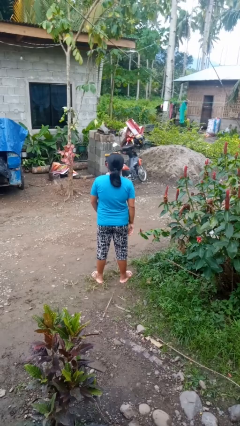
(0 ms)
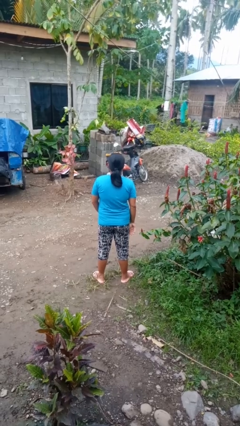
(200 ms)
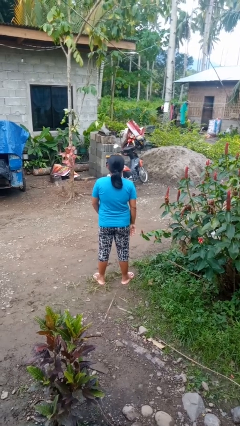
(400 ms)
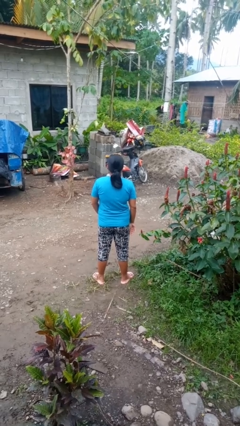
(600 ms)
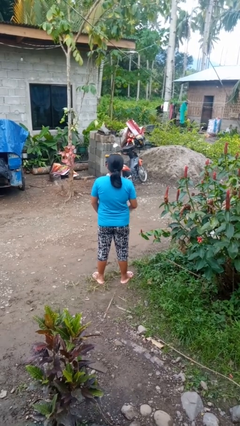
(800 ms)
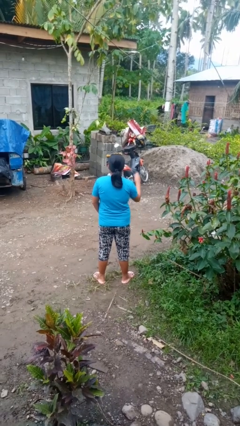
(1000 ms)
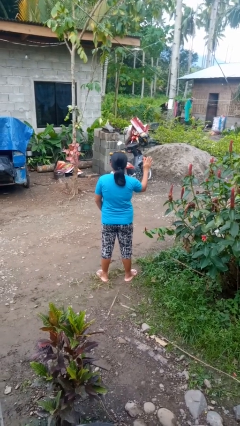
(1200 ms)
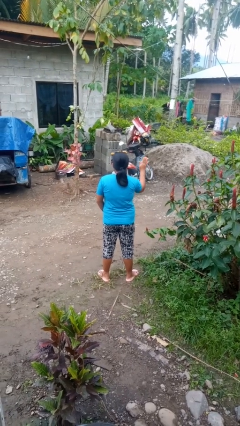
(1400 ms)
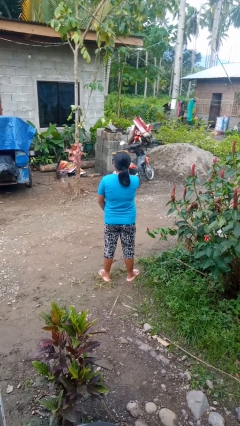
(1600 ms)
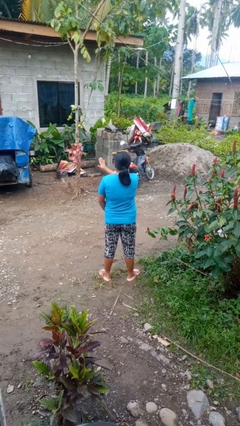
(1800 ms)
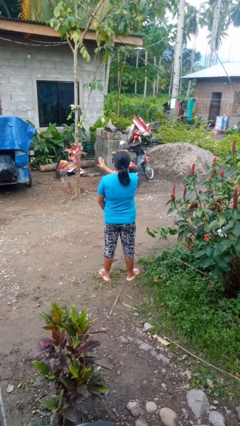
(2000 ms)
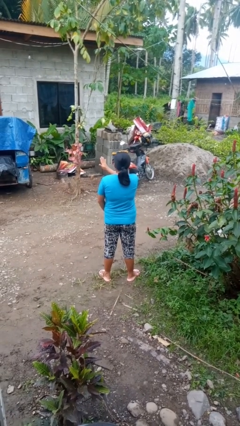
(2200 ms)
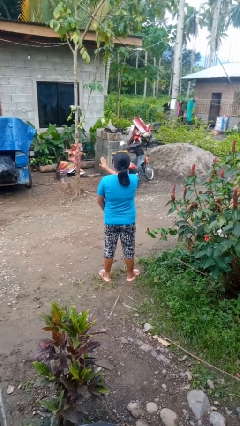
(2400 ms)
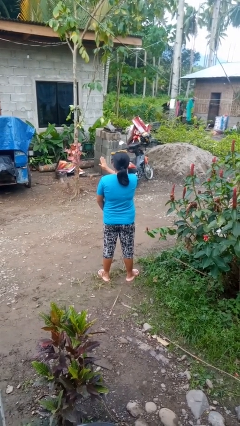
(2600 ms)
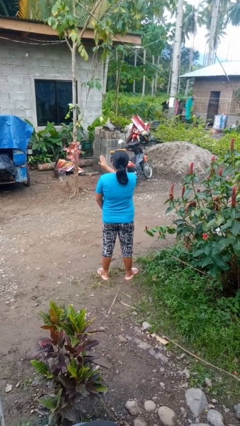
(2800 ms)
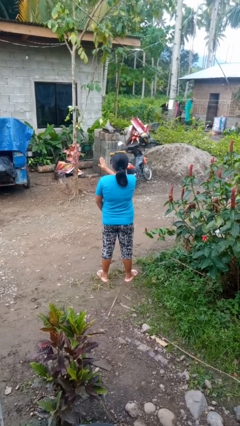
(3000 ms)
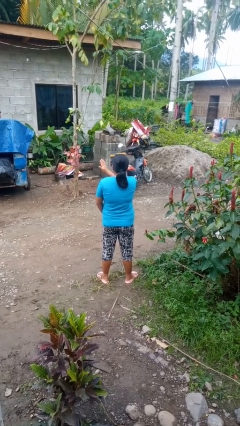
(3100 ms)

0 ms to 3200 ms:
person gestures swipe left

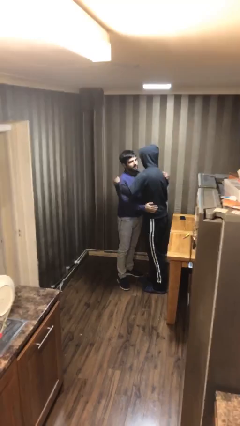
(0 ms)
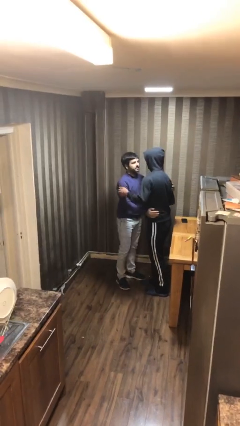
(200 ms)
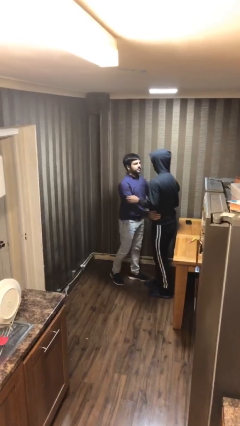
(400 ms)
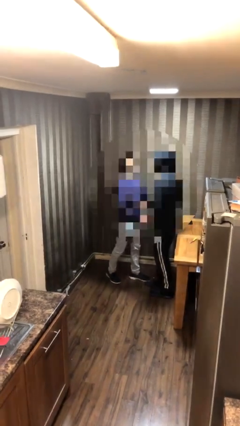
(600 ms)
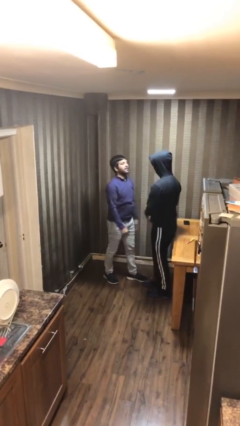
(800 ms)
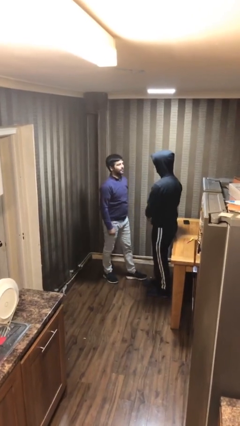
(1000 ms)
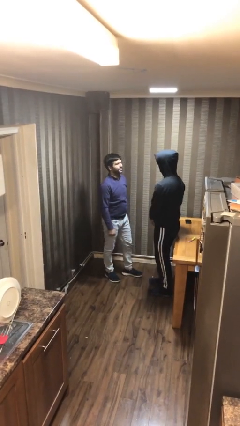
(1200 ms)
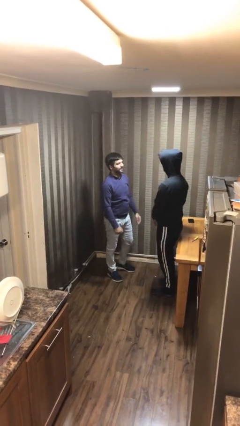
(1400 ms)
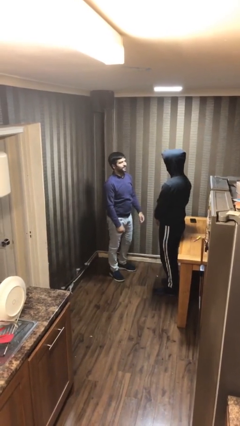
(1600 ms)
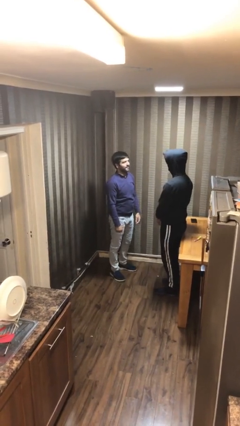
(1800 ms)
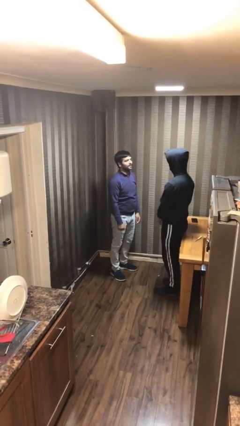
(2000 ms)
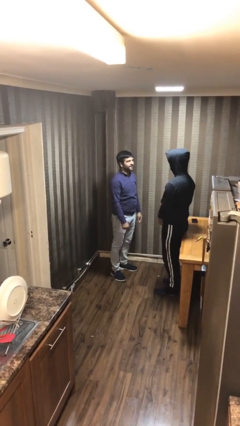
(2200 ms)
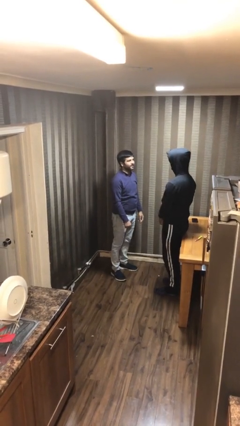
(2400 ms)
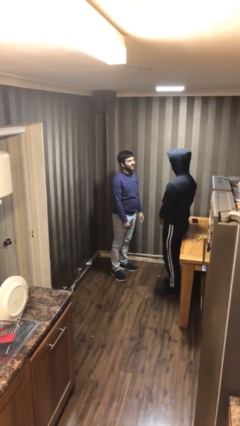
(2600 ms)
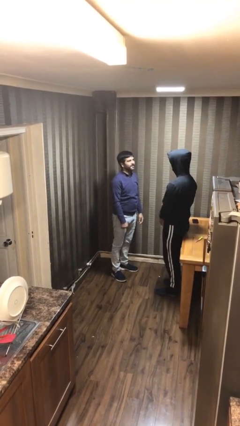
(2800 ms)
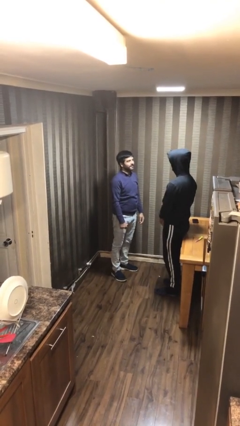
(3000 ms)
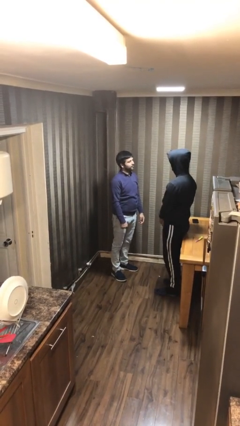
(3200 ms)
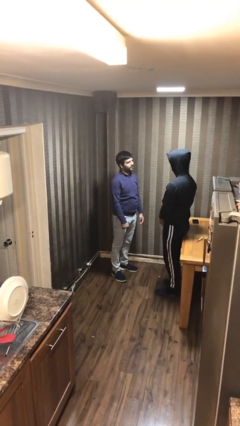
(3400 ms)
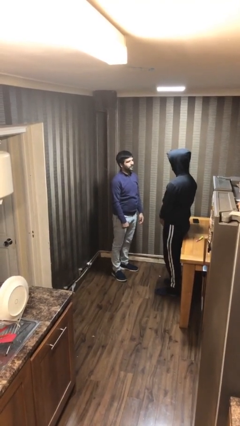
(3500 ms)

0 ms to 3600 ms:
person talks to person

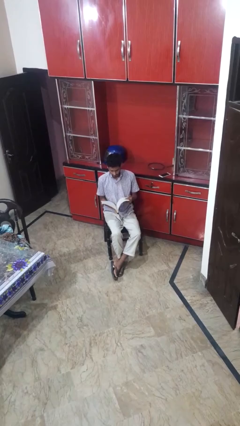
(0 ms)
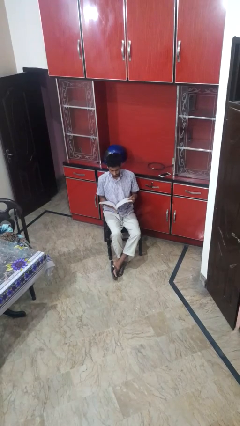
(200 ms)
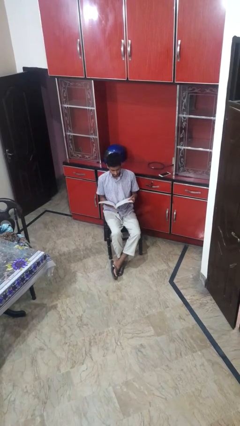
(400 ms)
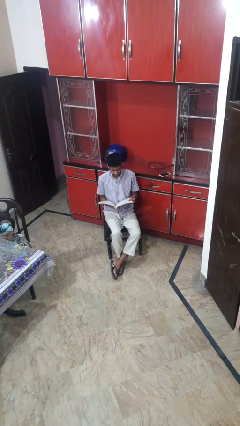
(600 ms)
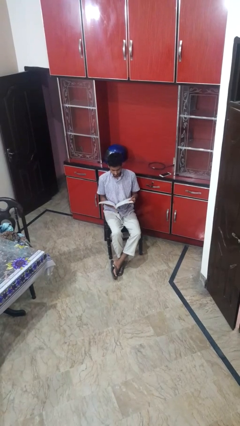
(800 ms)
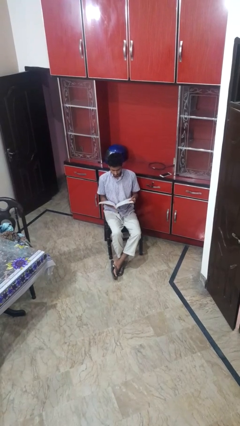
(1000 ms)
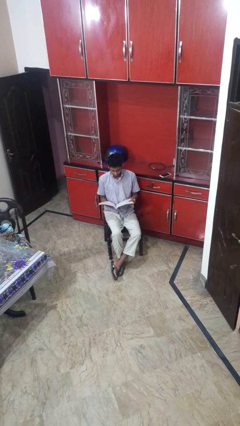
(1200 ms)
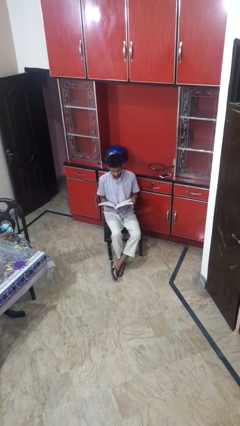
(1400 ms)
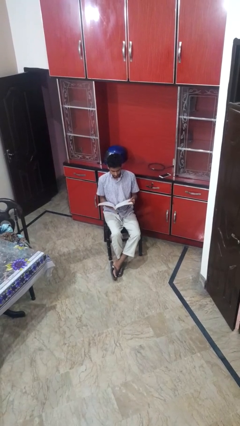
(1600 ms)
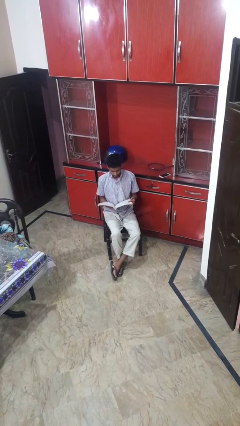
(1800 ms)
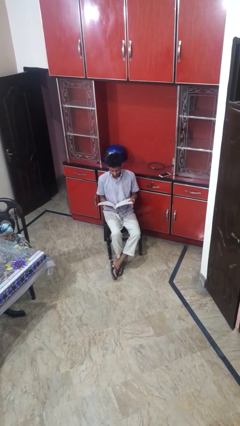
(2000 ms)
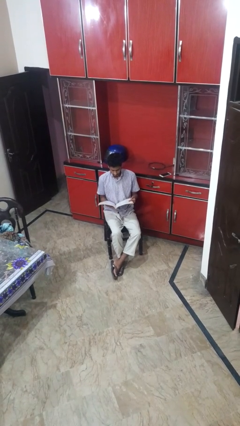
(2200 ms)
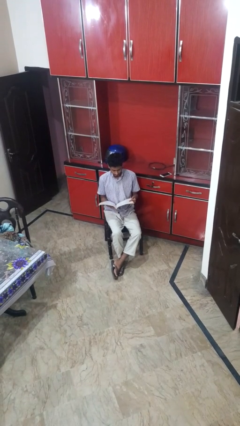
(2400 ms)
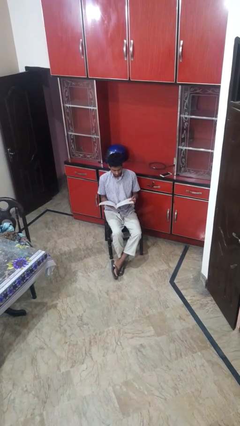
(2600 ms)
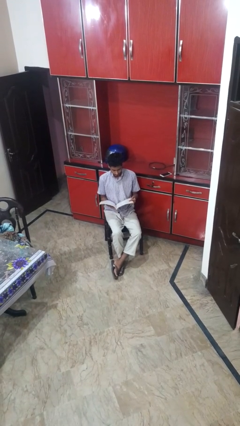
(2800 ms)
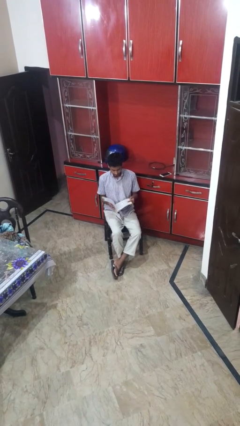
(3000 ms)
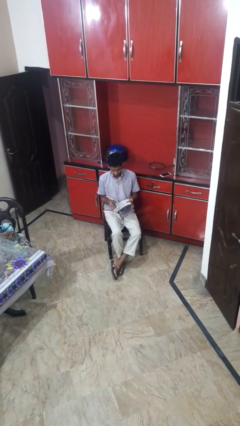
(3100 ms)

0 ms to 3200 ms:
person reads magazine

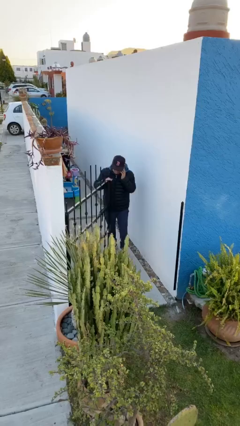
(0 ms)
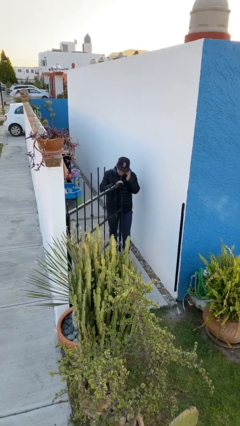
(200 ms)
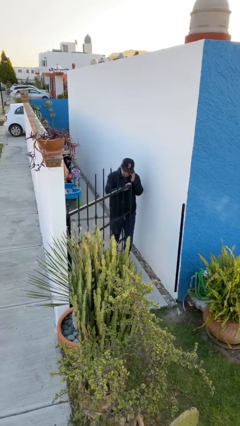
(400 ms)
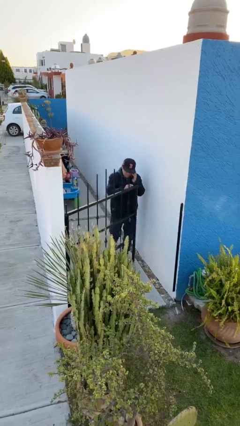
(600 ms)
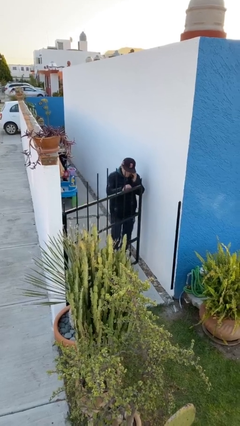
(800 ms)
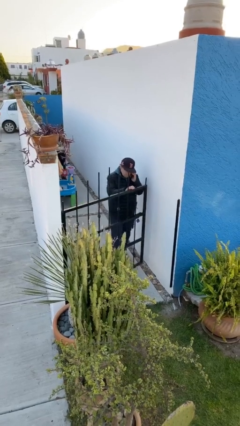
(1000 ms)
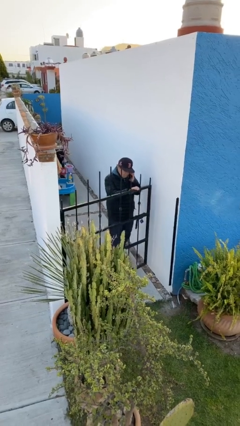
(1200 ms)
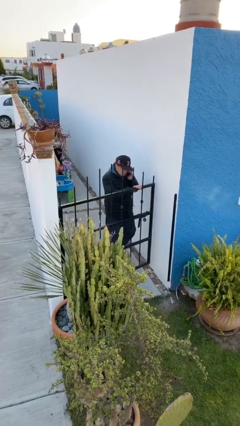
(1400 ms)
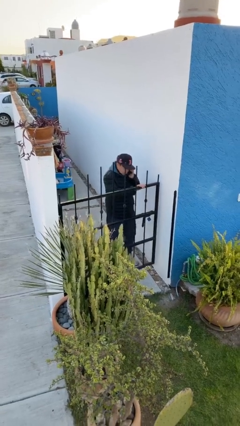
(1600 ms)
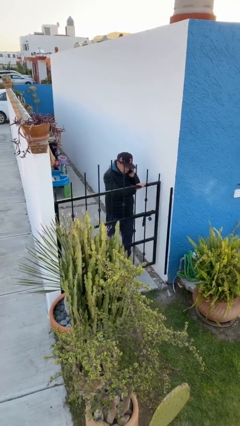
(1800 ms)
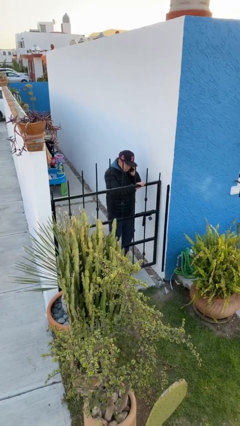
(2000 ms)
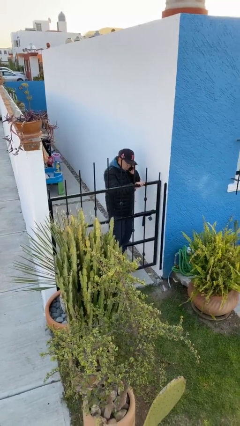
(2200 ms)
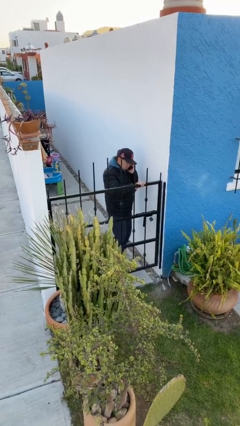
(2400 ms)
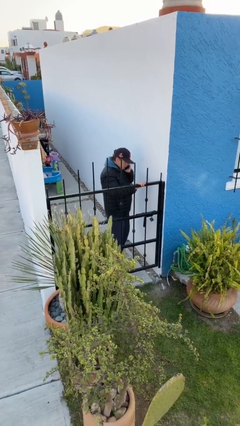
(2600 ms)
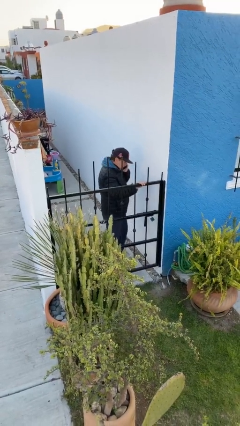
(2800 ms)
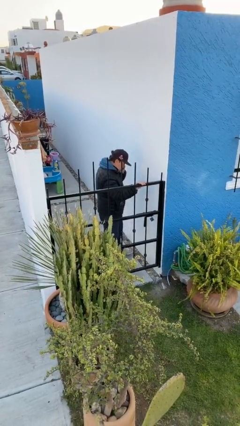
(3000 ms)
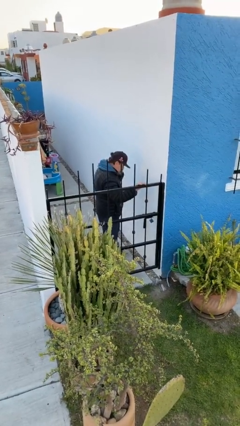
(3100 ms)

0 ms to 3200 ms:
person closes facility door

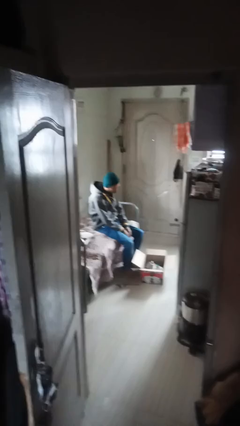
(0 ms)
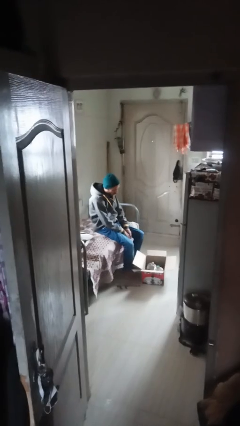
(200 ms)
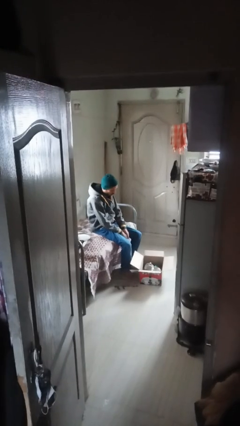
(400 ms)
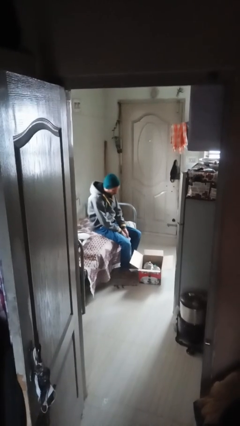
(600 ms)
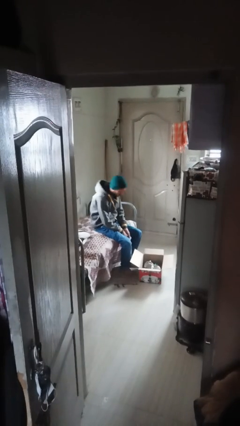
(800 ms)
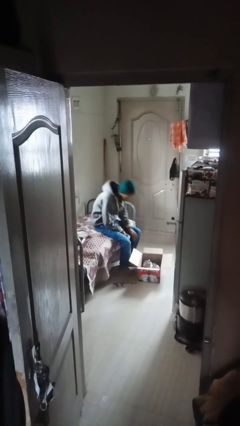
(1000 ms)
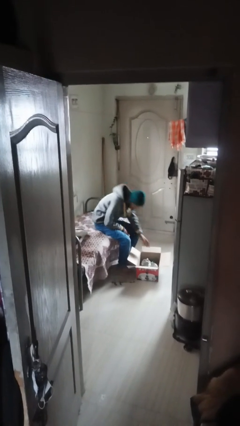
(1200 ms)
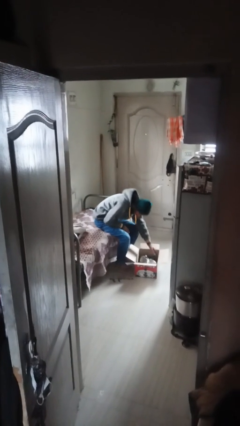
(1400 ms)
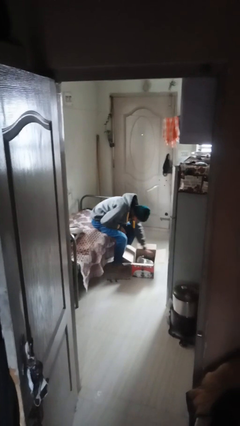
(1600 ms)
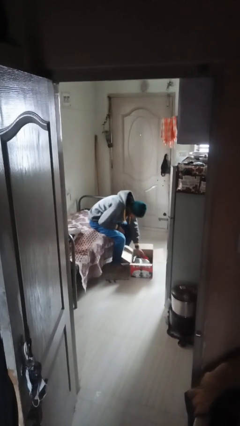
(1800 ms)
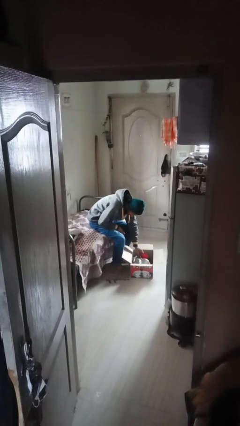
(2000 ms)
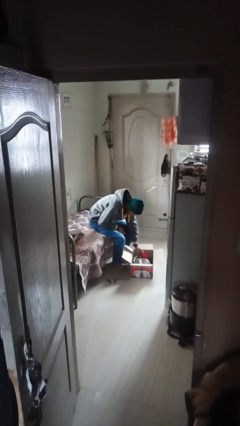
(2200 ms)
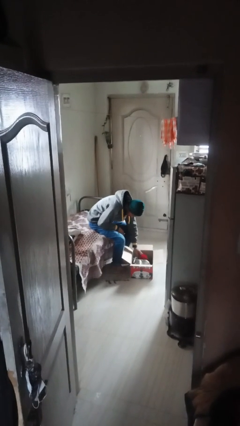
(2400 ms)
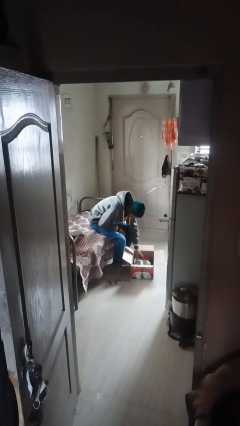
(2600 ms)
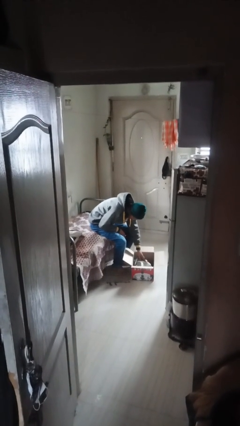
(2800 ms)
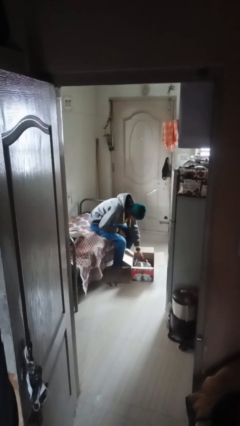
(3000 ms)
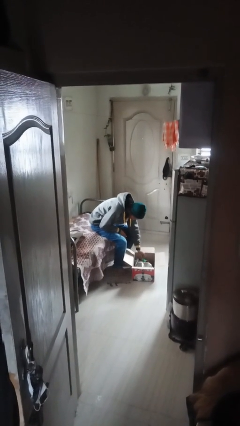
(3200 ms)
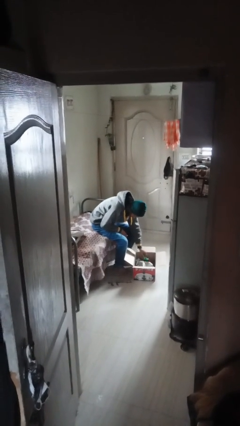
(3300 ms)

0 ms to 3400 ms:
person searches in box

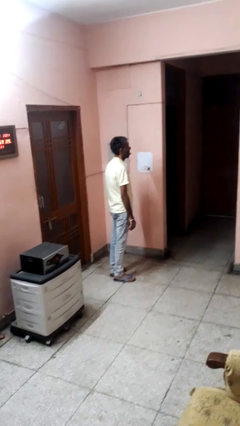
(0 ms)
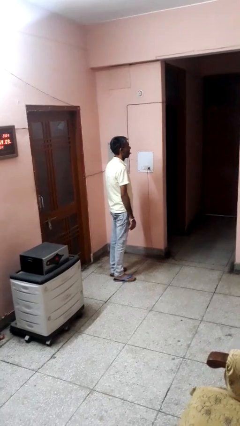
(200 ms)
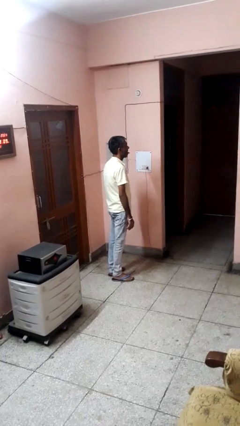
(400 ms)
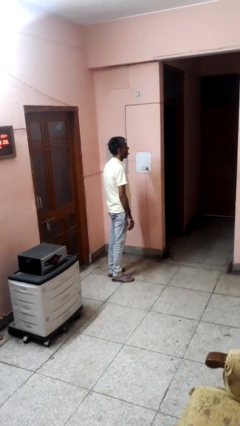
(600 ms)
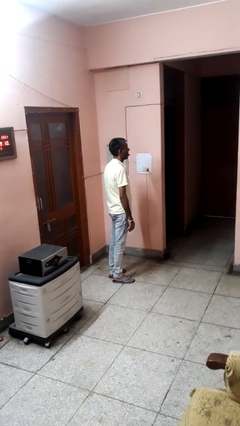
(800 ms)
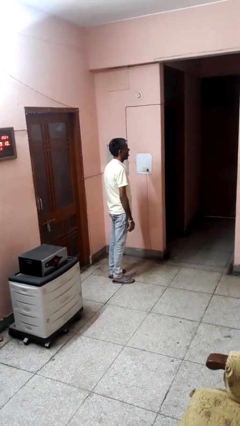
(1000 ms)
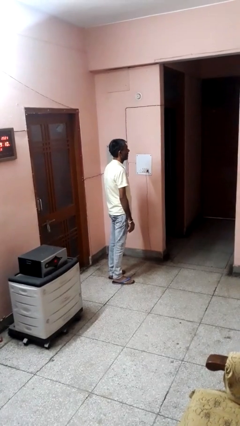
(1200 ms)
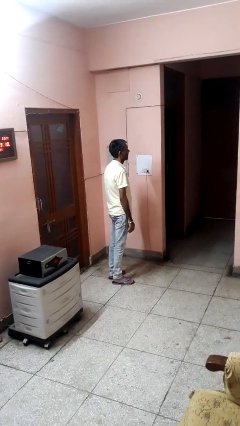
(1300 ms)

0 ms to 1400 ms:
person sticks out tongue
